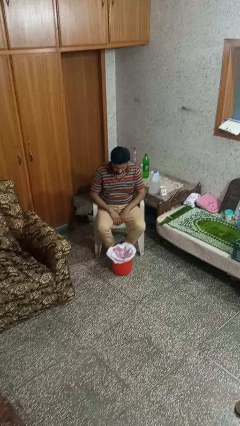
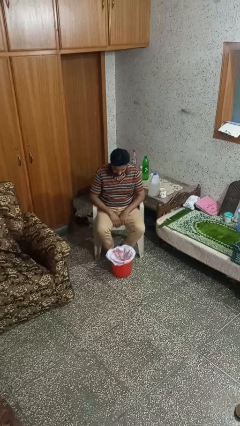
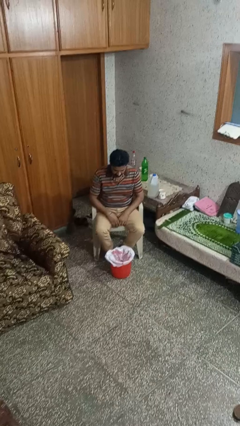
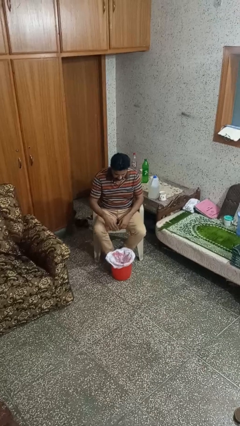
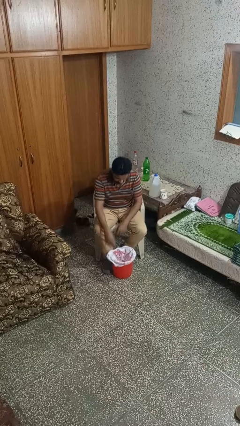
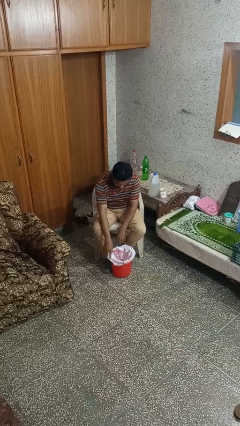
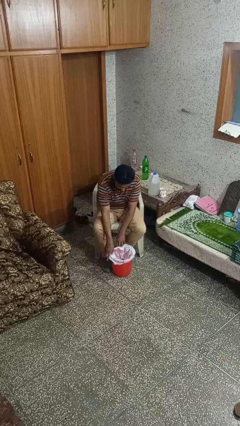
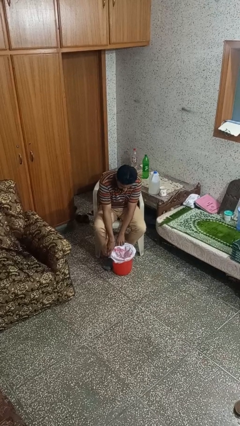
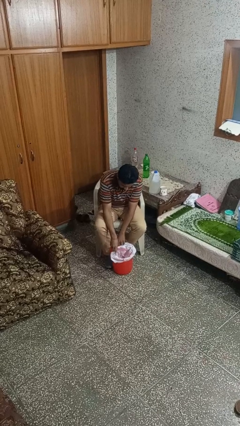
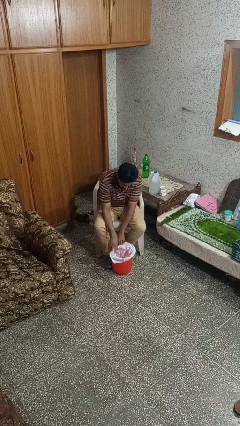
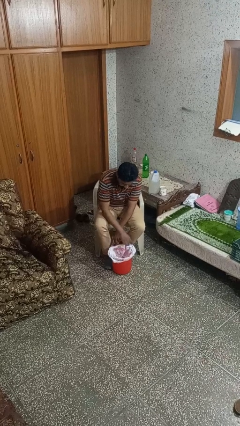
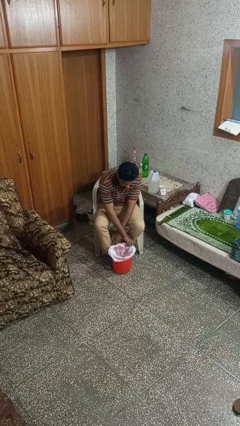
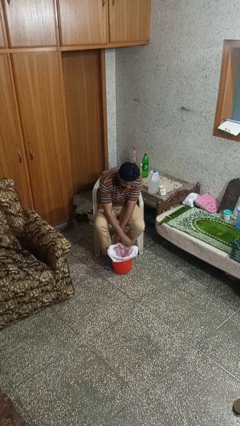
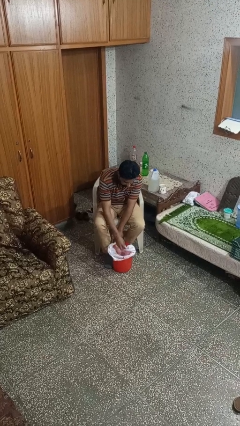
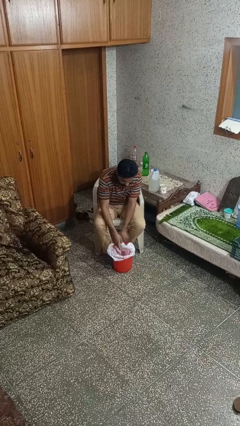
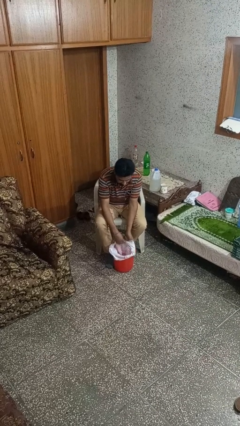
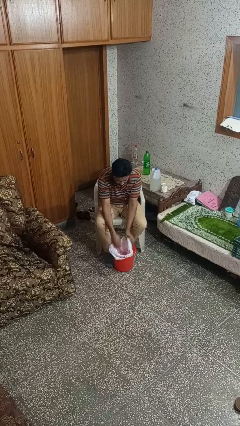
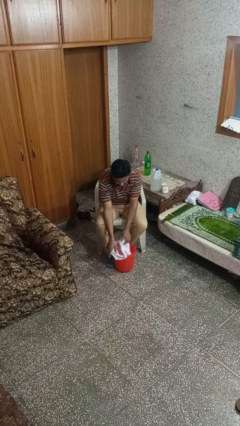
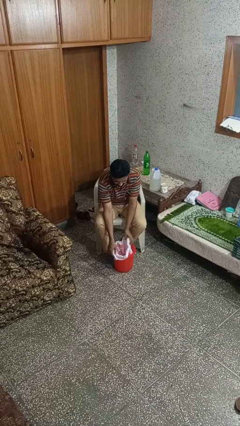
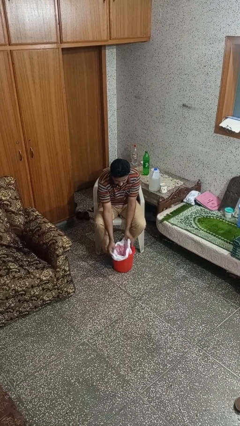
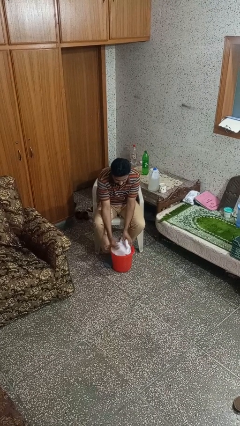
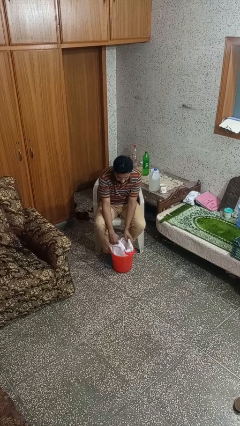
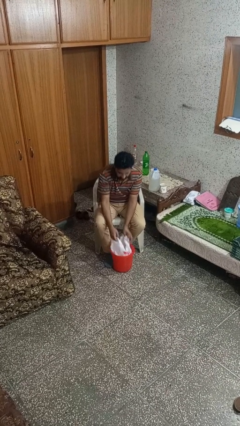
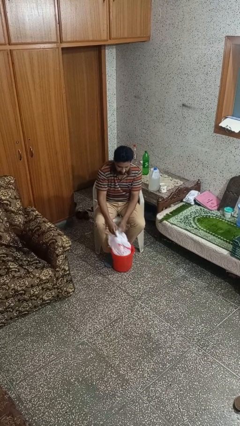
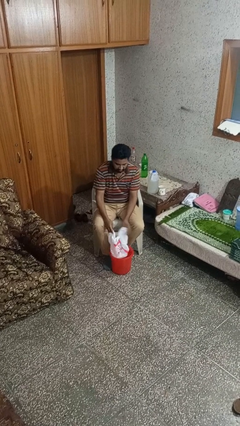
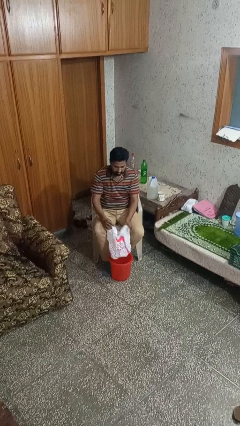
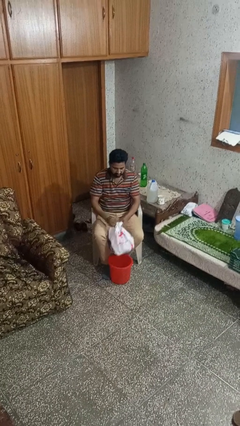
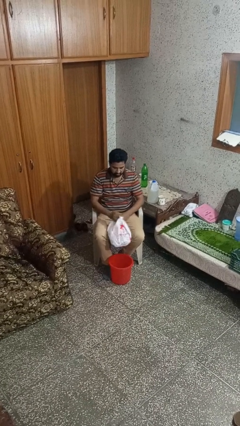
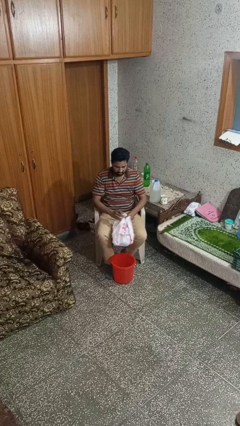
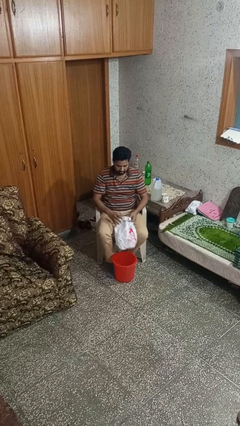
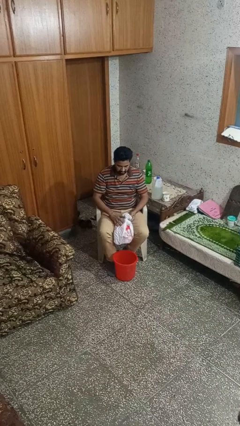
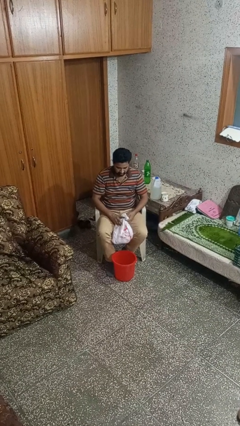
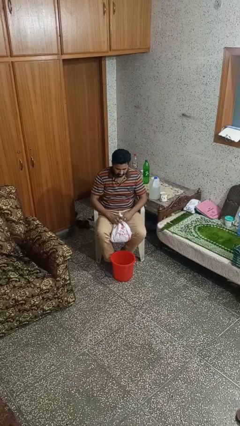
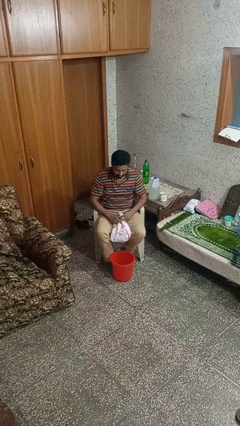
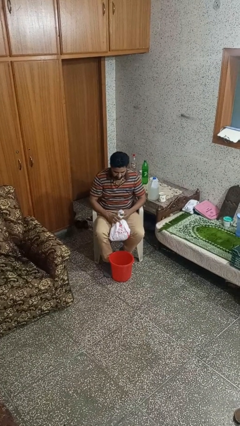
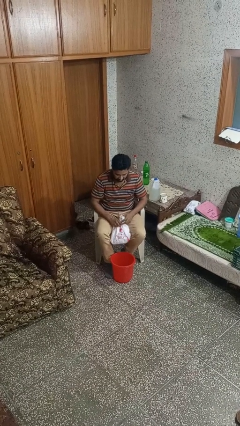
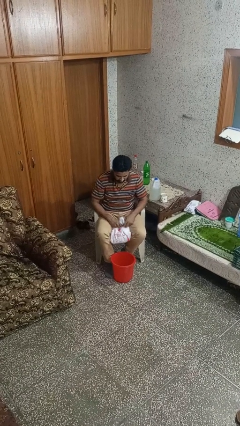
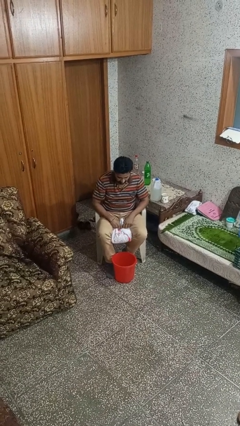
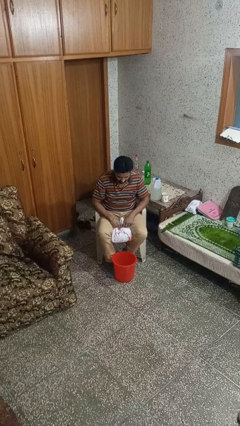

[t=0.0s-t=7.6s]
person removes trashbag from trashcan

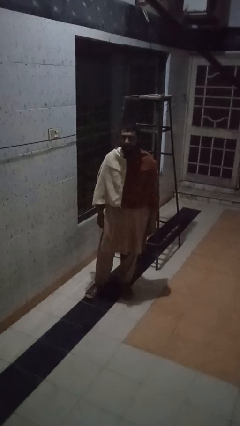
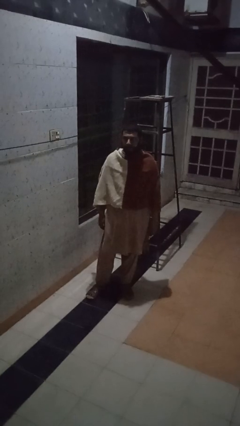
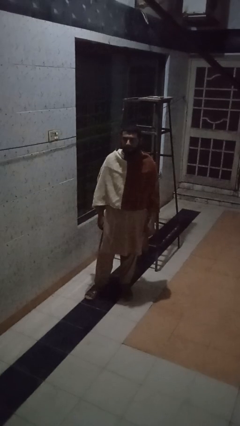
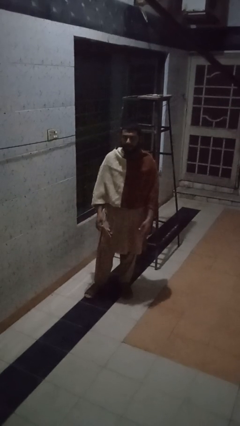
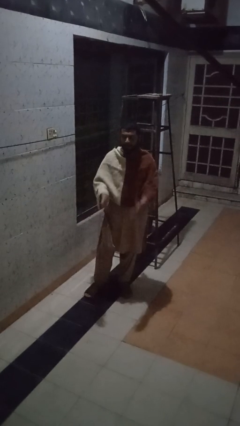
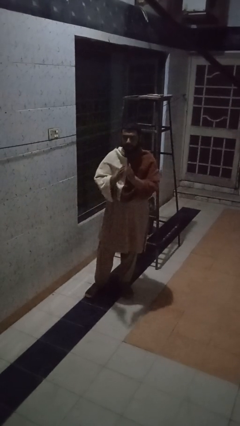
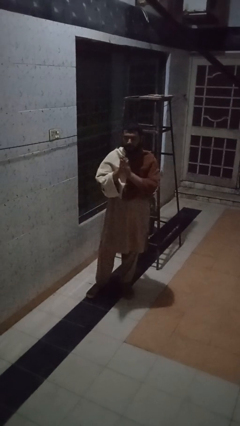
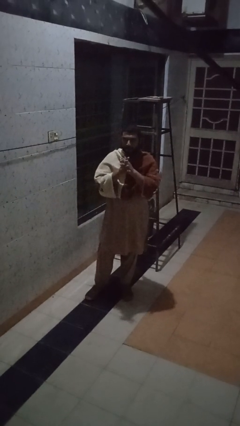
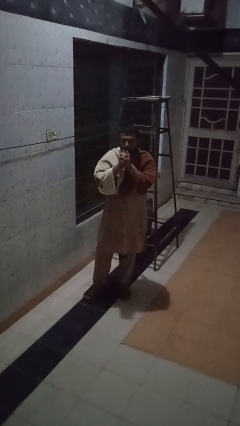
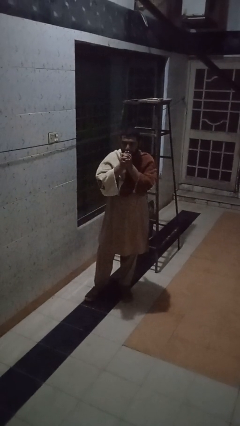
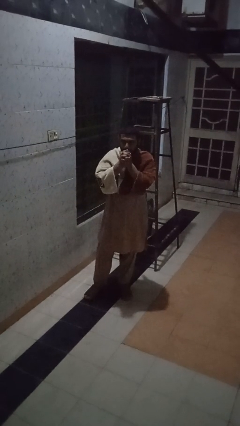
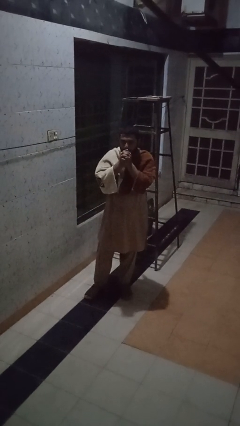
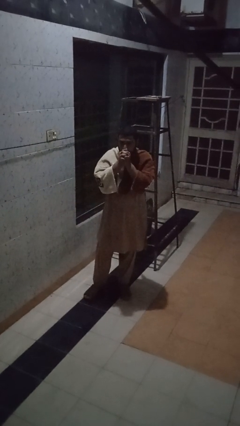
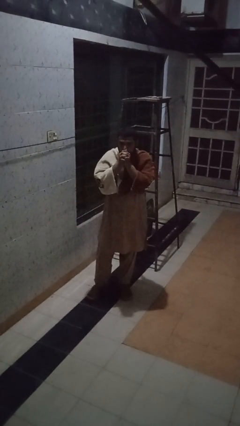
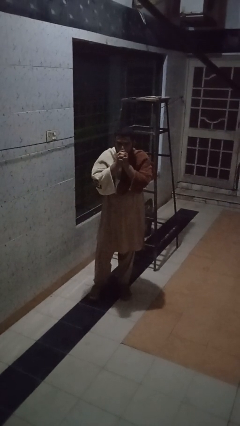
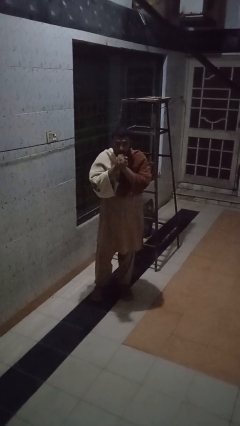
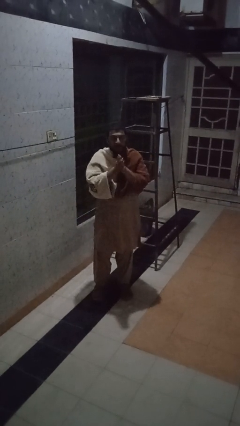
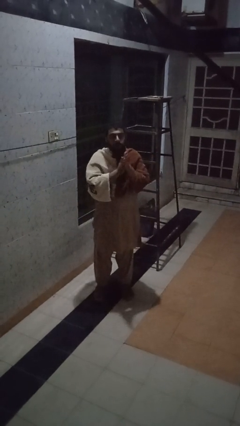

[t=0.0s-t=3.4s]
person blows into hands

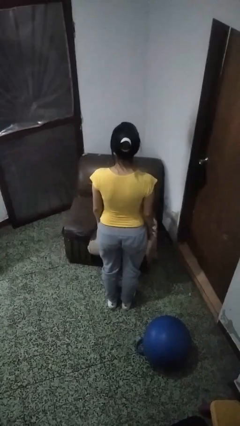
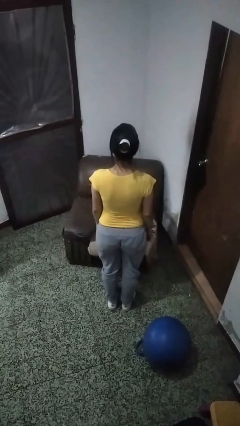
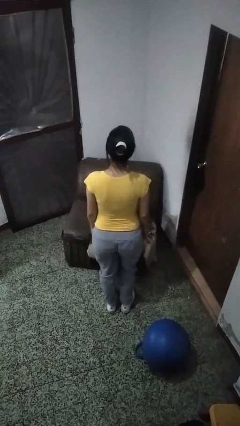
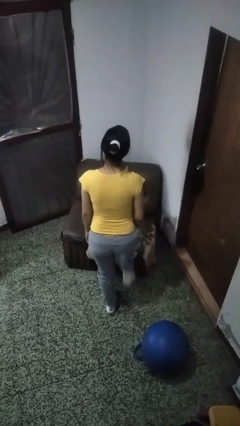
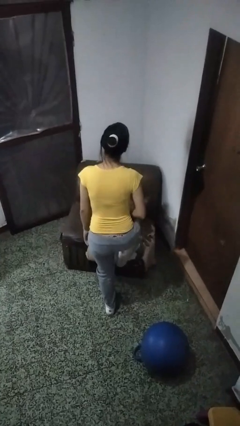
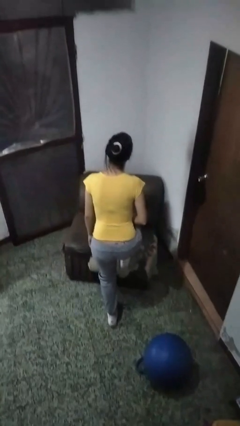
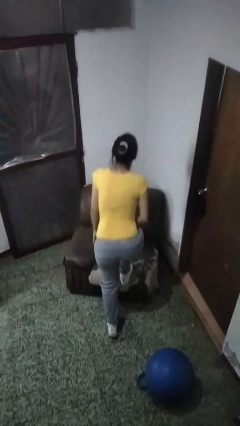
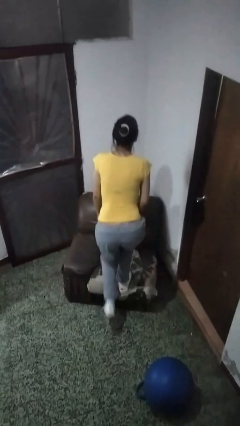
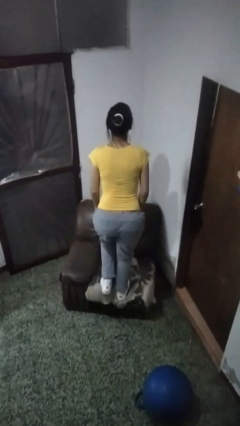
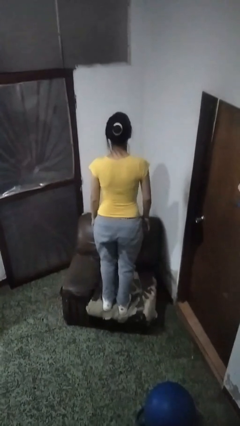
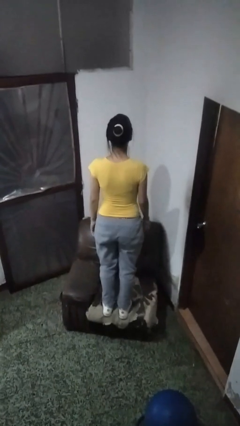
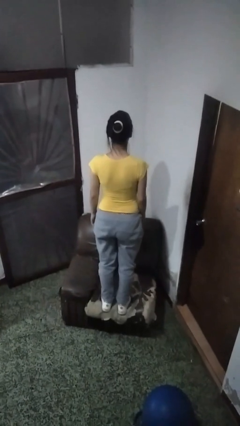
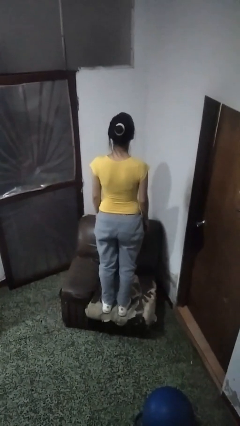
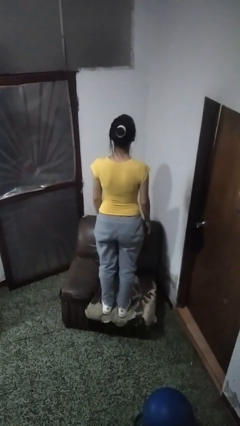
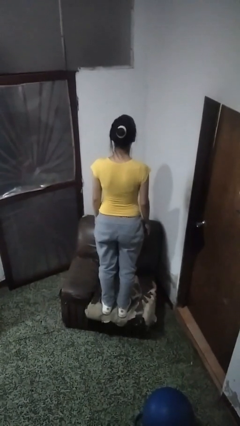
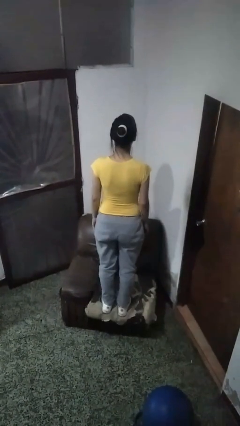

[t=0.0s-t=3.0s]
person climbs on couch

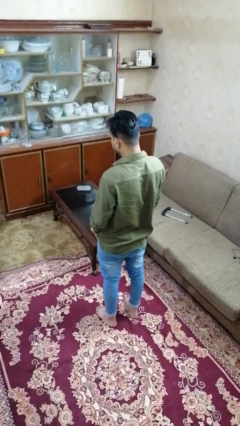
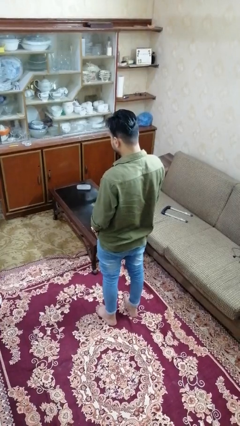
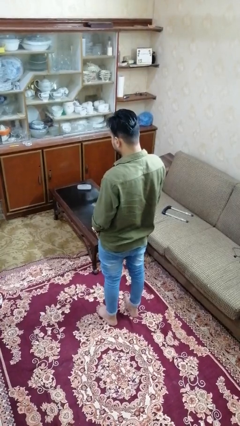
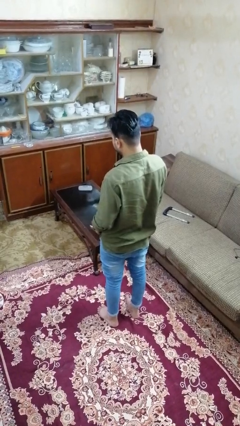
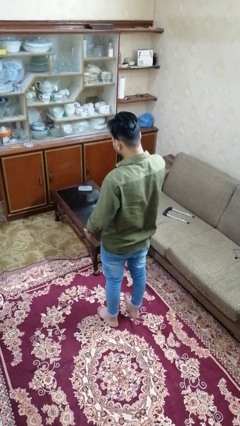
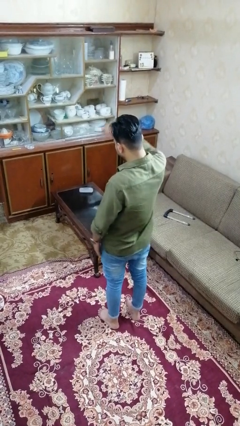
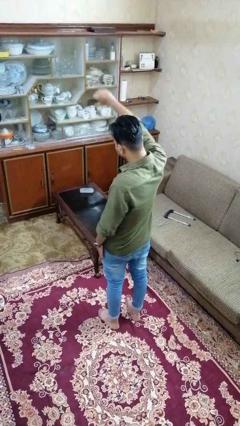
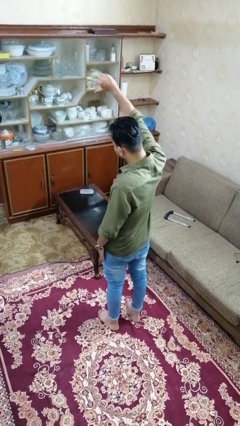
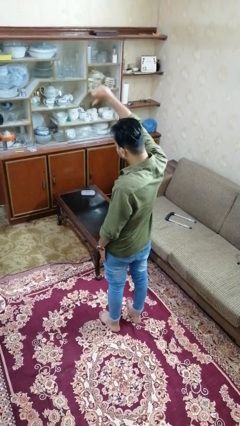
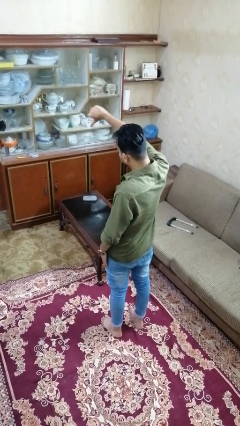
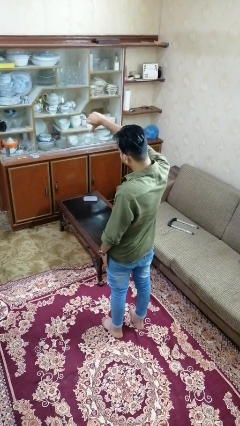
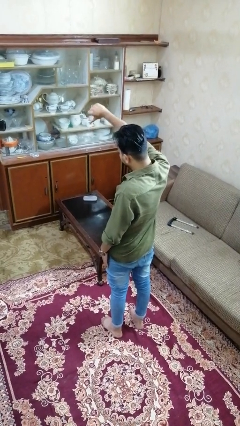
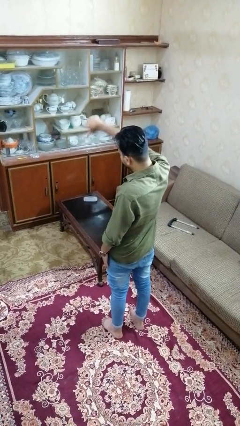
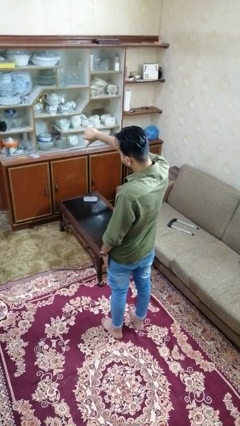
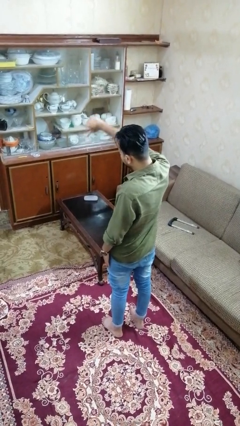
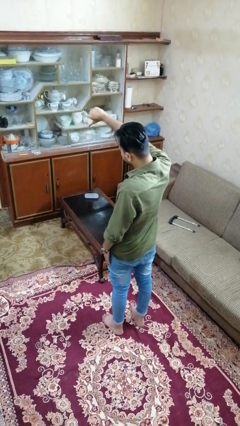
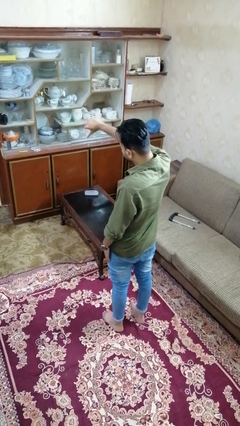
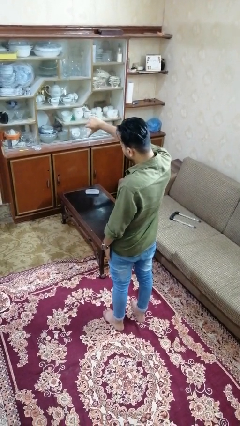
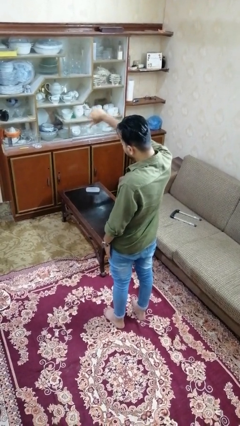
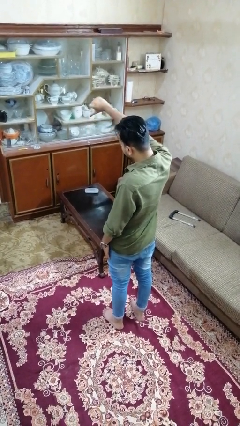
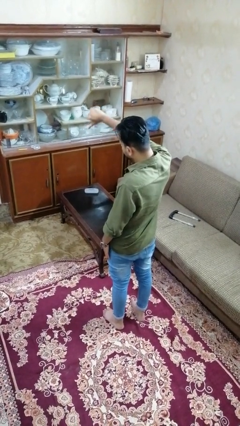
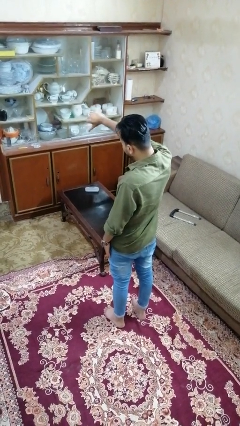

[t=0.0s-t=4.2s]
person gestures thumbs down
